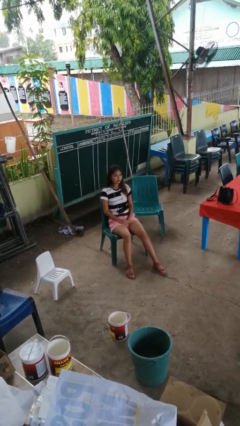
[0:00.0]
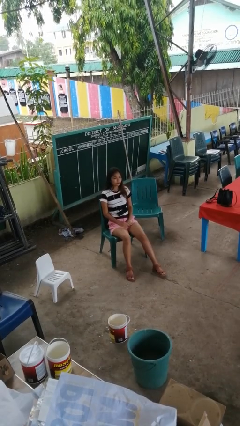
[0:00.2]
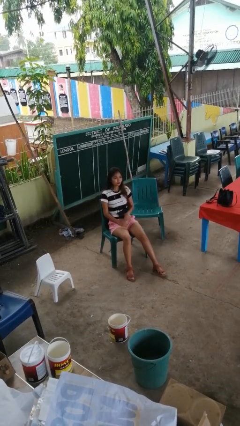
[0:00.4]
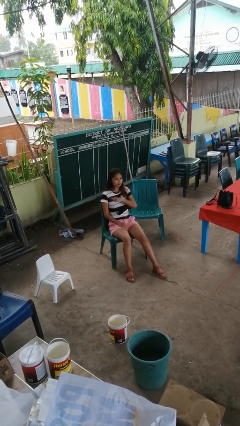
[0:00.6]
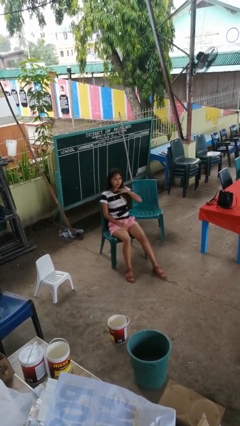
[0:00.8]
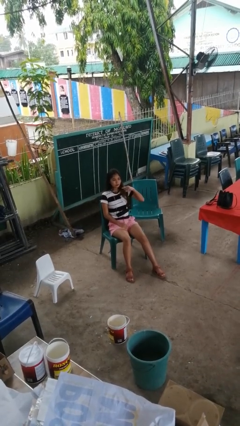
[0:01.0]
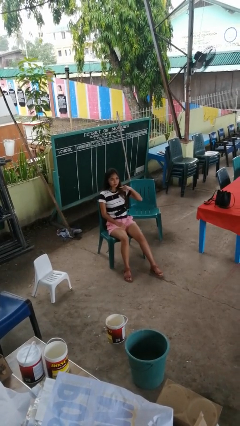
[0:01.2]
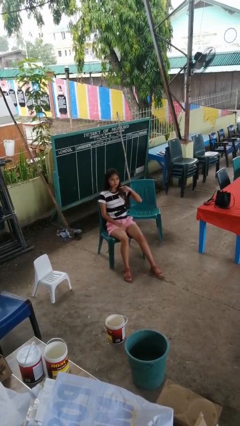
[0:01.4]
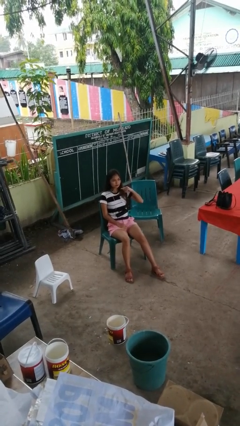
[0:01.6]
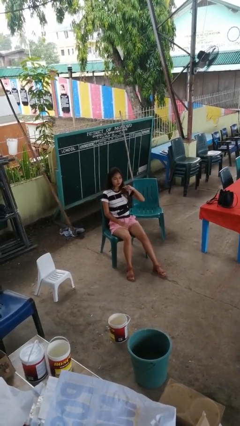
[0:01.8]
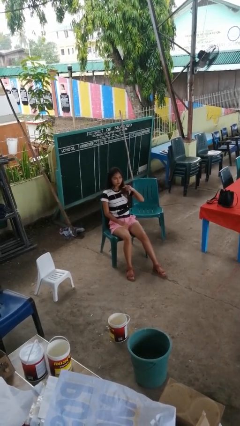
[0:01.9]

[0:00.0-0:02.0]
person gestures cut

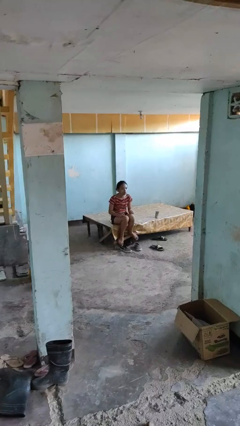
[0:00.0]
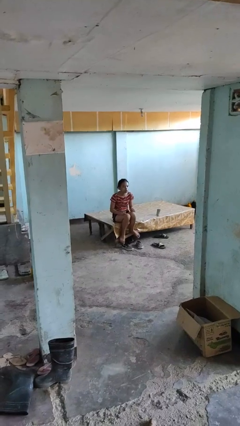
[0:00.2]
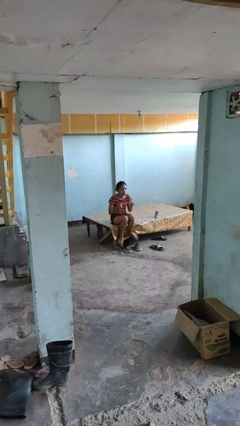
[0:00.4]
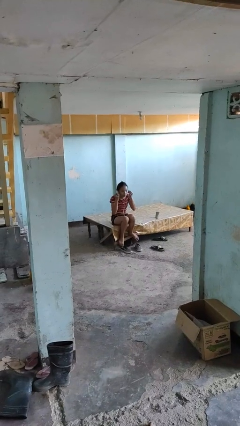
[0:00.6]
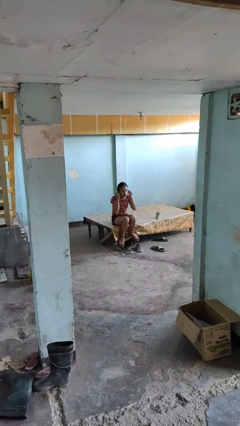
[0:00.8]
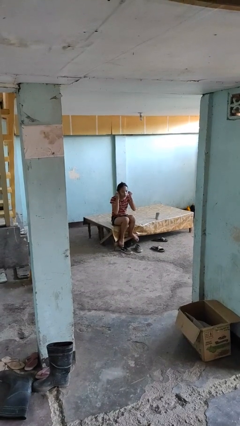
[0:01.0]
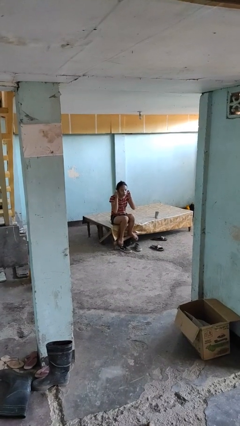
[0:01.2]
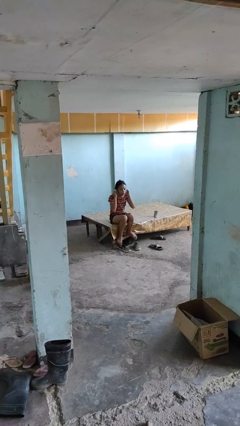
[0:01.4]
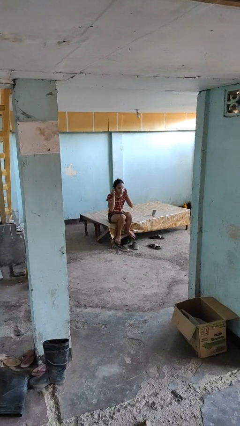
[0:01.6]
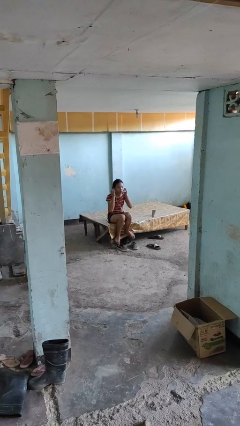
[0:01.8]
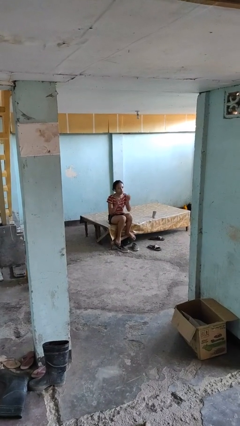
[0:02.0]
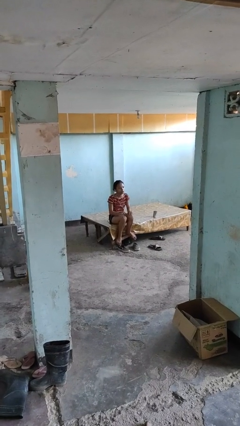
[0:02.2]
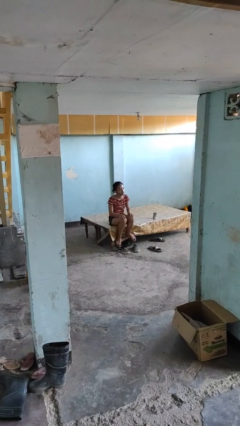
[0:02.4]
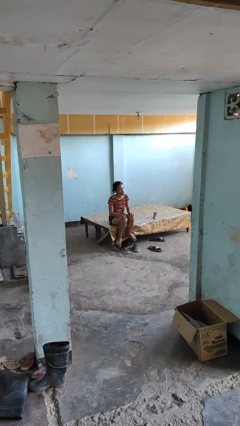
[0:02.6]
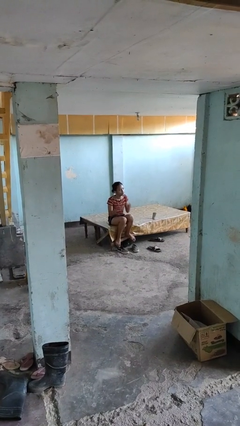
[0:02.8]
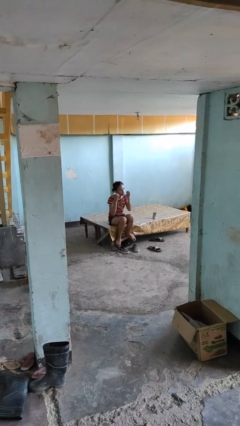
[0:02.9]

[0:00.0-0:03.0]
person puts on headphones

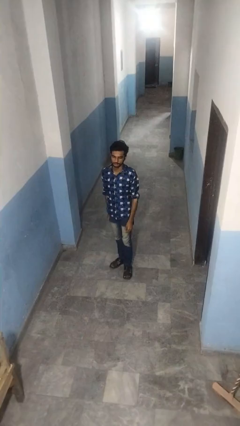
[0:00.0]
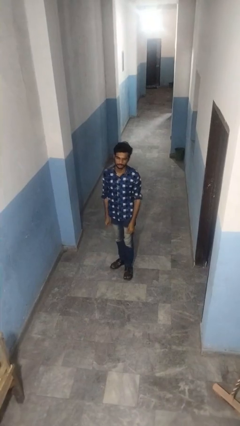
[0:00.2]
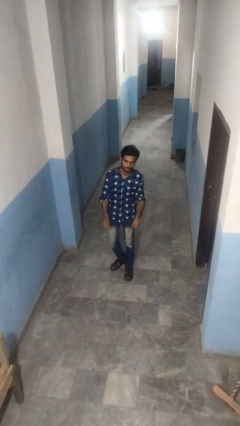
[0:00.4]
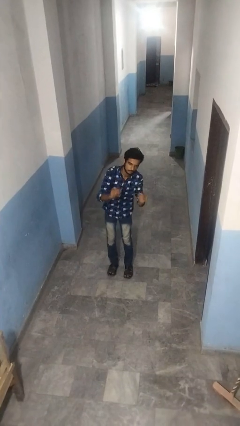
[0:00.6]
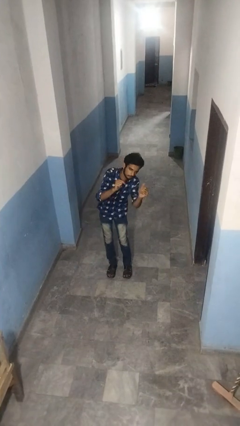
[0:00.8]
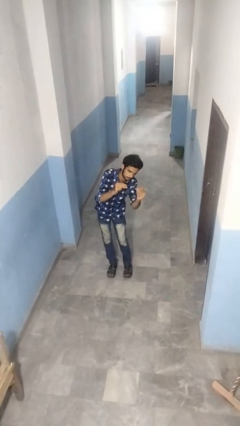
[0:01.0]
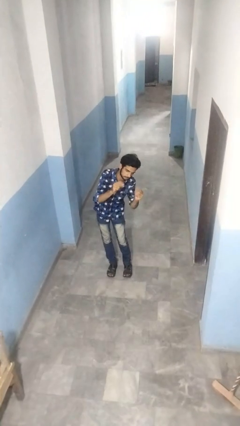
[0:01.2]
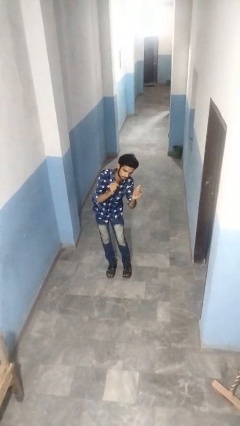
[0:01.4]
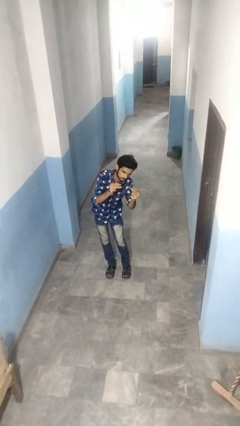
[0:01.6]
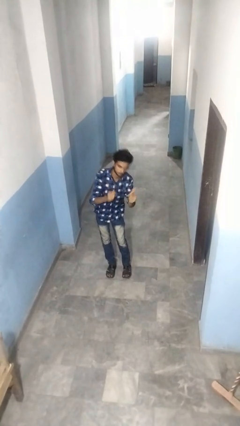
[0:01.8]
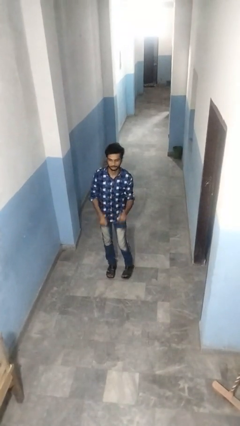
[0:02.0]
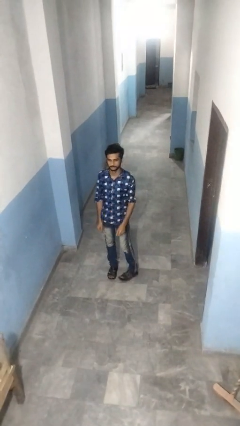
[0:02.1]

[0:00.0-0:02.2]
person snaps fingers

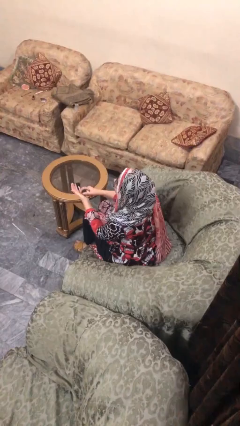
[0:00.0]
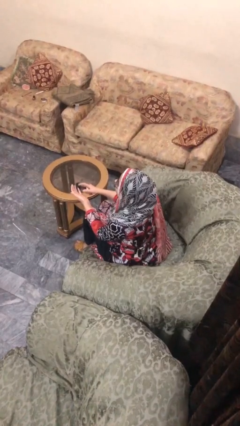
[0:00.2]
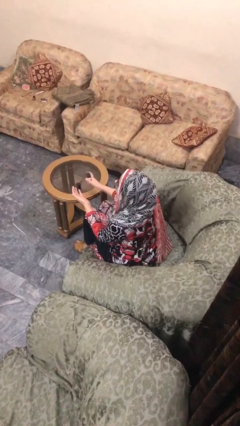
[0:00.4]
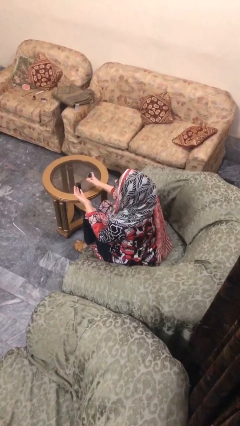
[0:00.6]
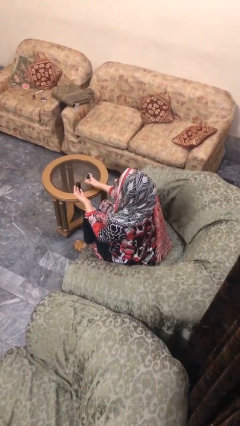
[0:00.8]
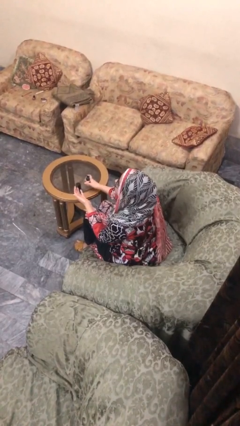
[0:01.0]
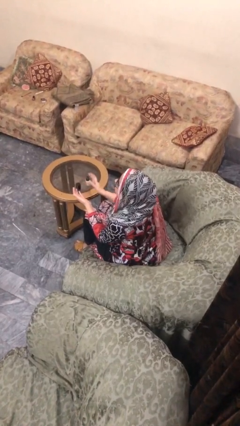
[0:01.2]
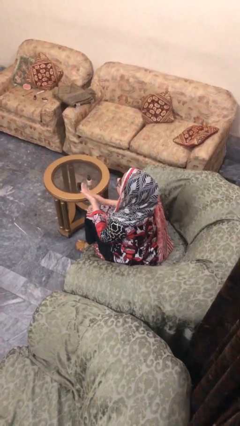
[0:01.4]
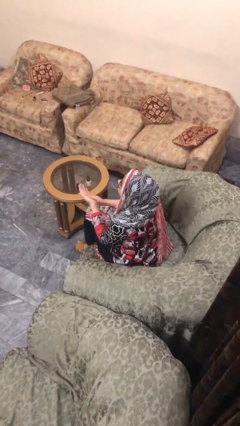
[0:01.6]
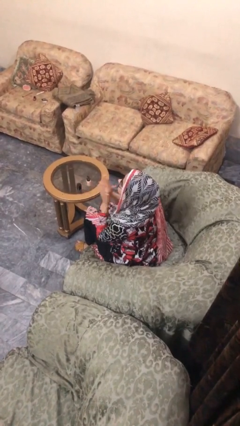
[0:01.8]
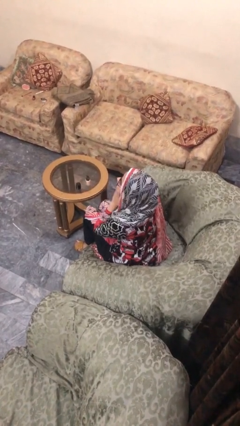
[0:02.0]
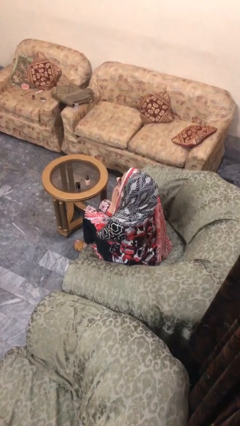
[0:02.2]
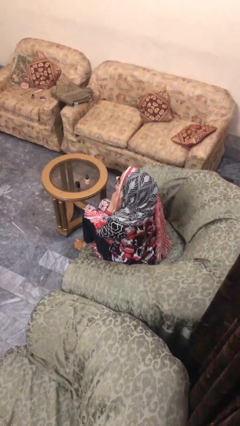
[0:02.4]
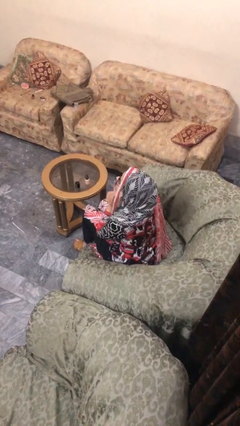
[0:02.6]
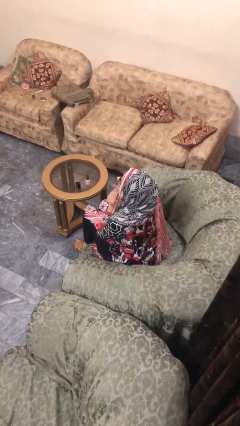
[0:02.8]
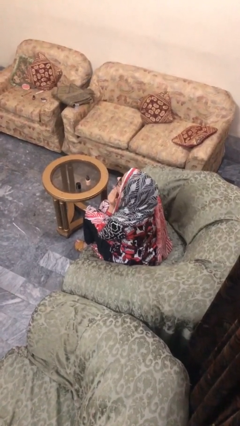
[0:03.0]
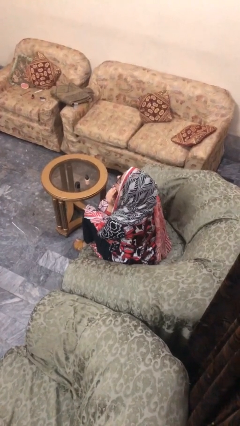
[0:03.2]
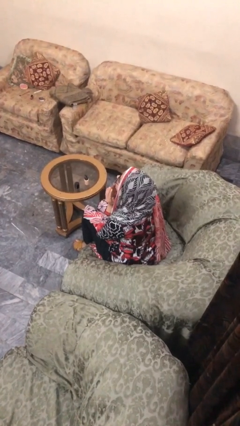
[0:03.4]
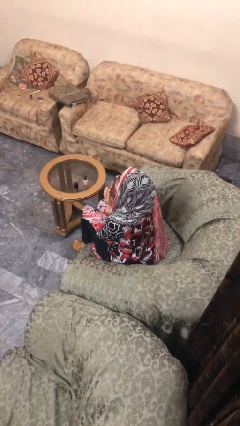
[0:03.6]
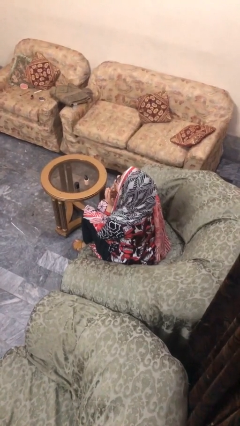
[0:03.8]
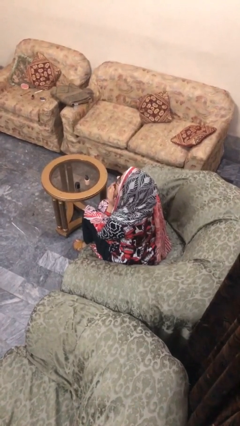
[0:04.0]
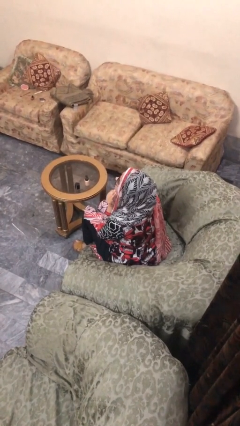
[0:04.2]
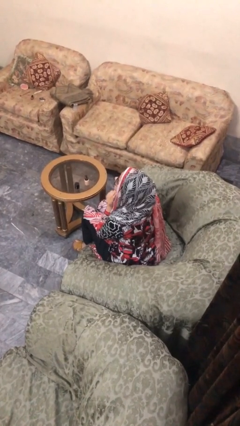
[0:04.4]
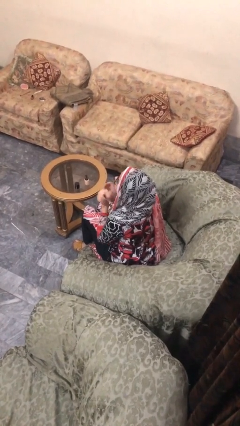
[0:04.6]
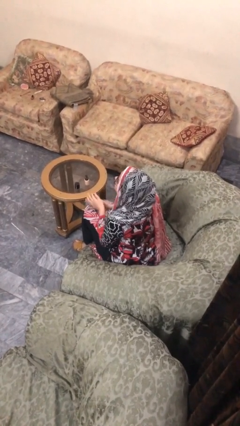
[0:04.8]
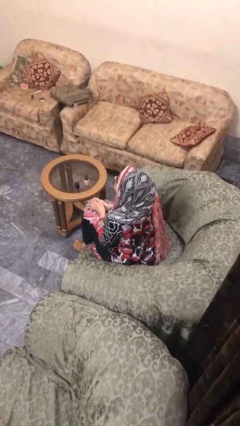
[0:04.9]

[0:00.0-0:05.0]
person applies foundation makeup

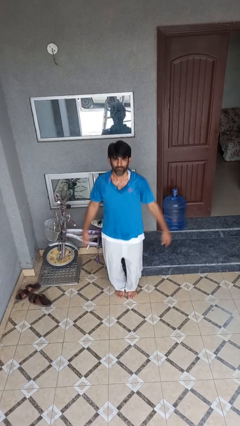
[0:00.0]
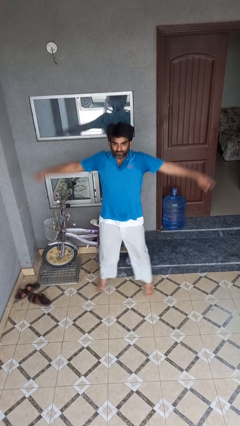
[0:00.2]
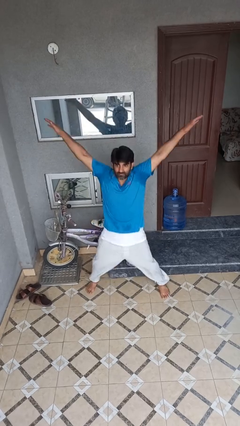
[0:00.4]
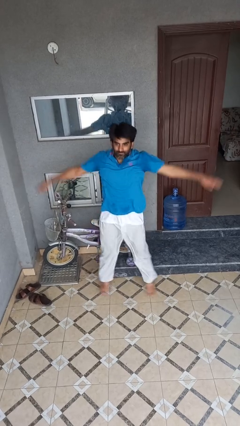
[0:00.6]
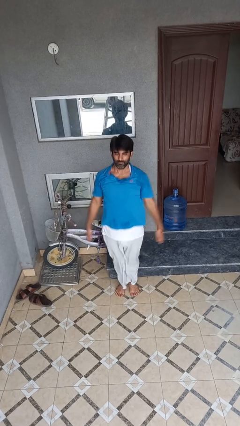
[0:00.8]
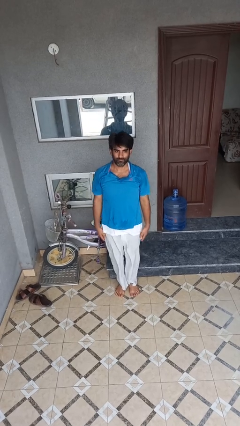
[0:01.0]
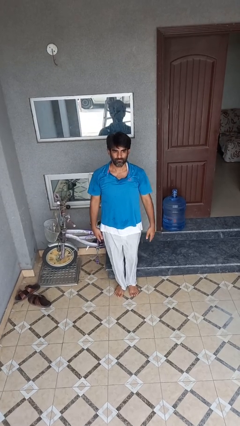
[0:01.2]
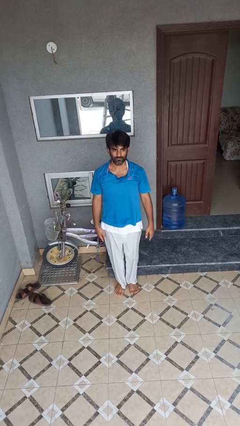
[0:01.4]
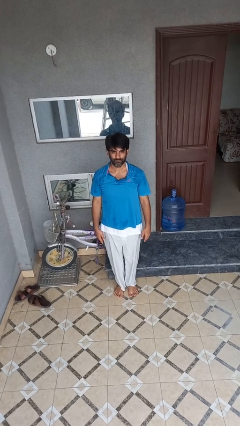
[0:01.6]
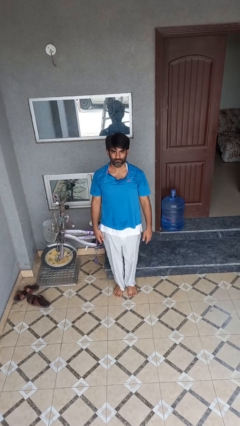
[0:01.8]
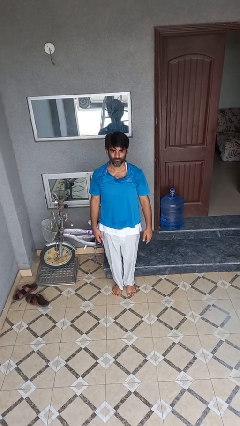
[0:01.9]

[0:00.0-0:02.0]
person exercises with jumping jacks

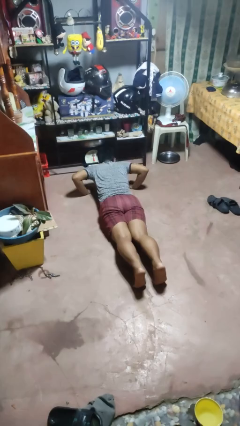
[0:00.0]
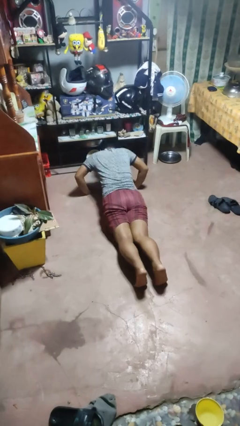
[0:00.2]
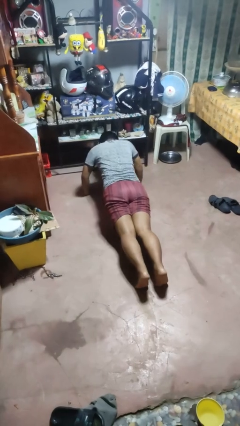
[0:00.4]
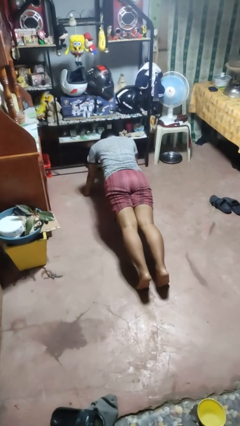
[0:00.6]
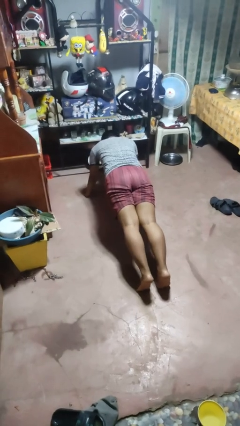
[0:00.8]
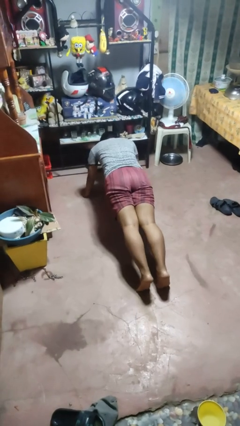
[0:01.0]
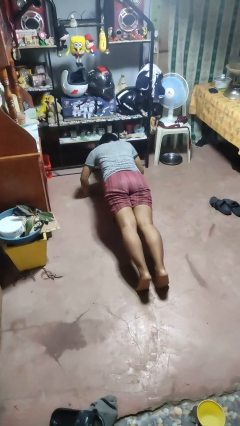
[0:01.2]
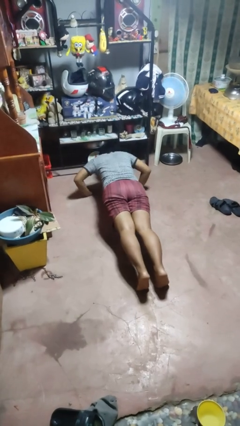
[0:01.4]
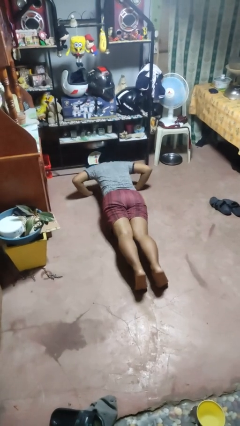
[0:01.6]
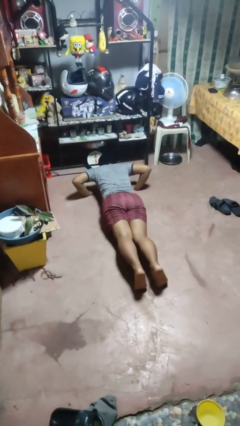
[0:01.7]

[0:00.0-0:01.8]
person exercises with pushup

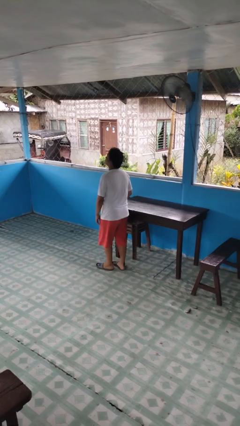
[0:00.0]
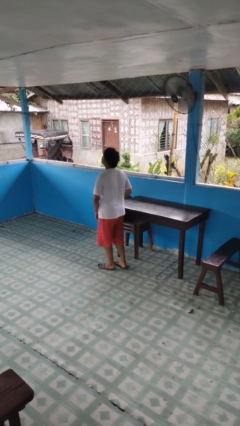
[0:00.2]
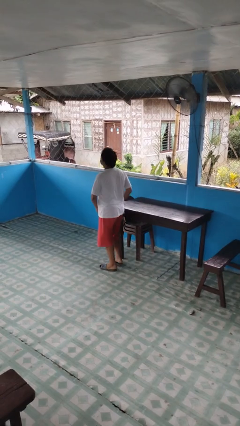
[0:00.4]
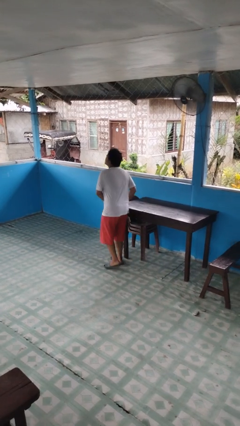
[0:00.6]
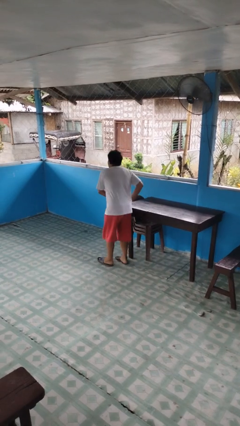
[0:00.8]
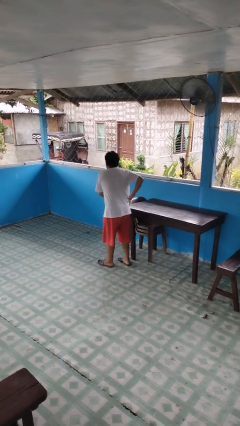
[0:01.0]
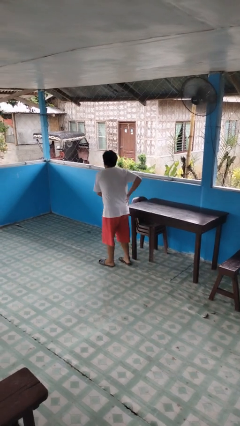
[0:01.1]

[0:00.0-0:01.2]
person bumps into table
